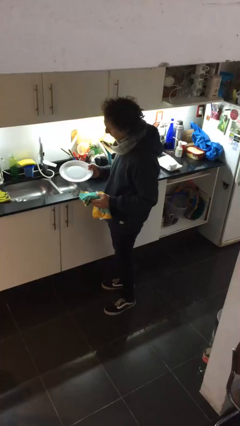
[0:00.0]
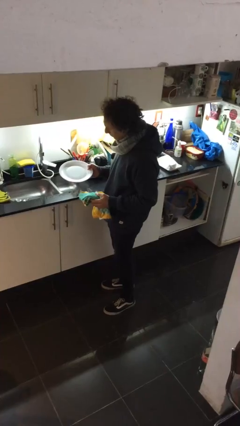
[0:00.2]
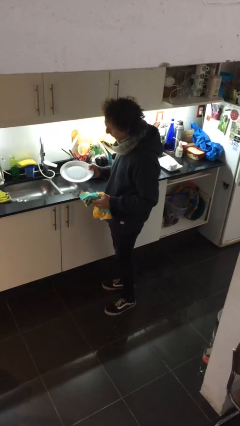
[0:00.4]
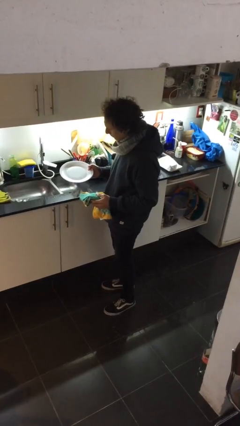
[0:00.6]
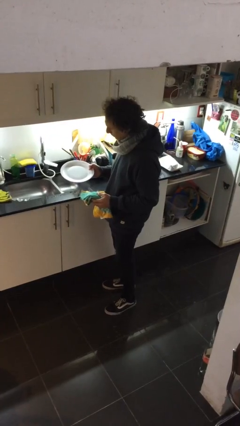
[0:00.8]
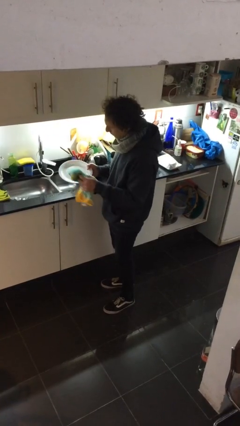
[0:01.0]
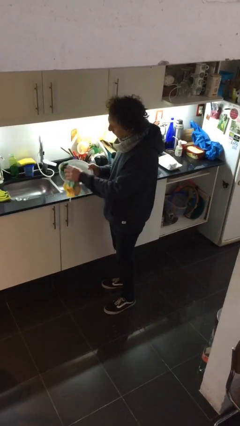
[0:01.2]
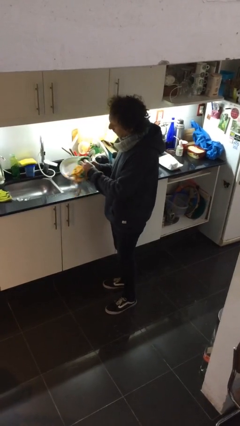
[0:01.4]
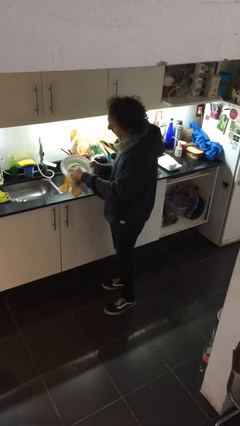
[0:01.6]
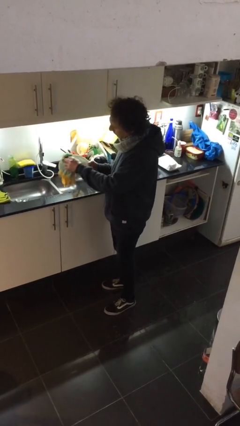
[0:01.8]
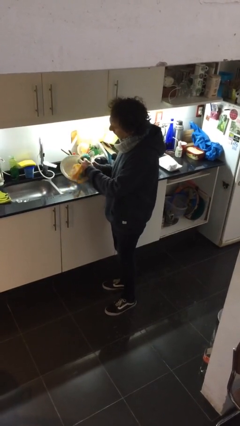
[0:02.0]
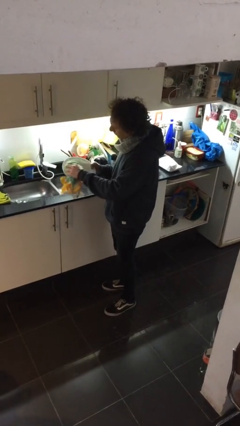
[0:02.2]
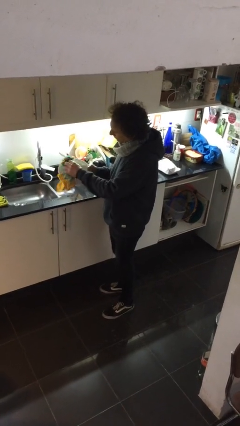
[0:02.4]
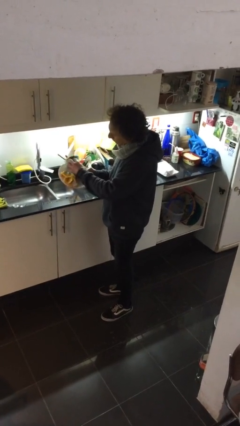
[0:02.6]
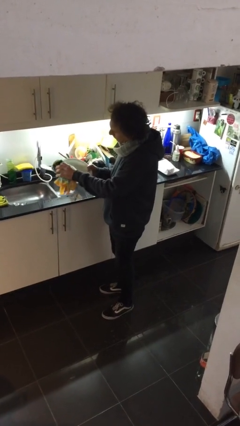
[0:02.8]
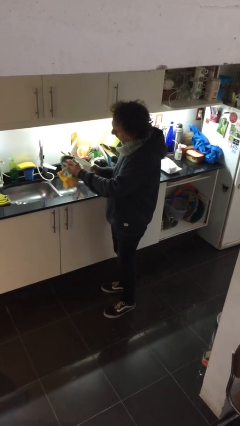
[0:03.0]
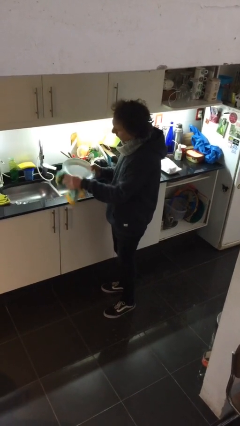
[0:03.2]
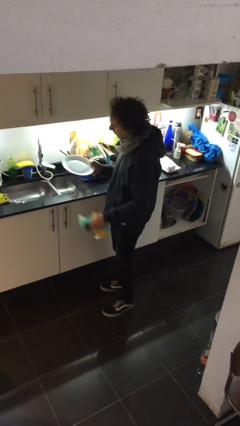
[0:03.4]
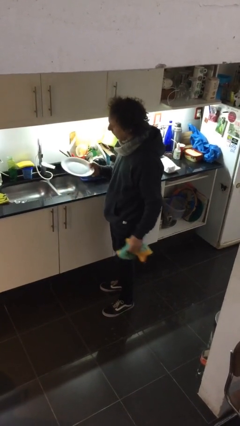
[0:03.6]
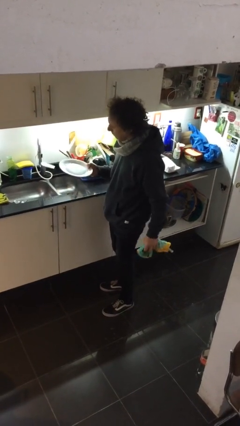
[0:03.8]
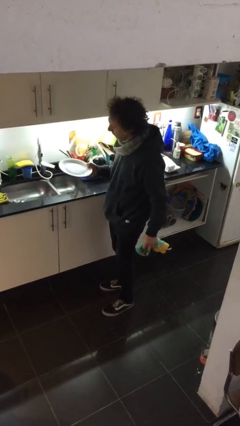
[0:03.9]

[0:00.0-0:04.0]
person dries dish

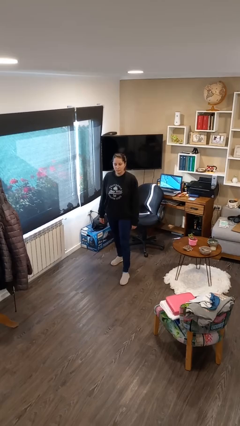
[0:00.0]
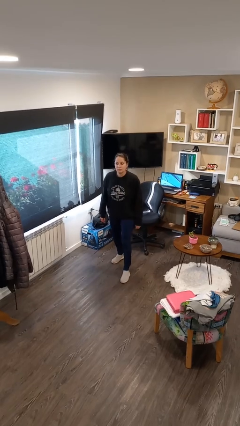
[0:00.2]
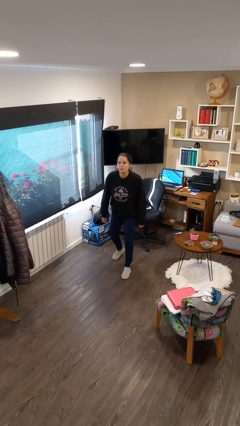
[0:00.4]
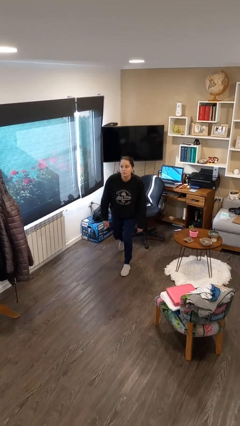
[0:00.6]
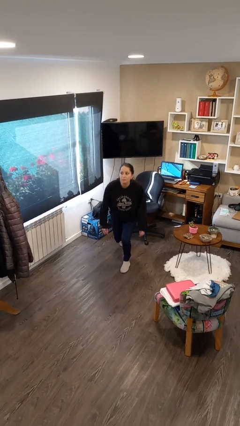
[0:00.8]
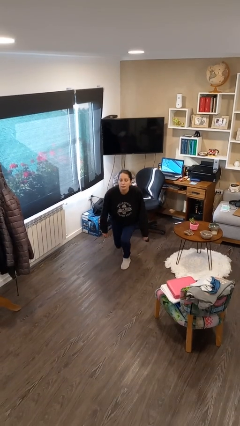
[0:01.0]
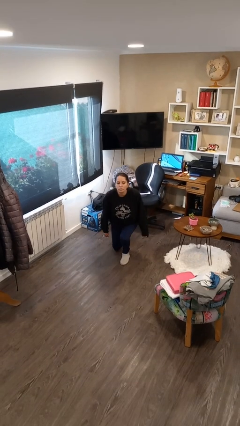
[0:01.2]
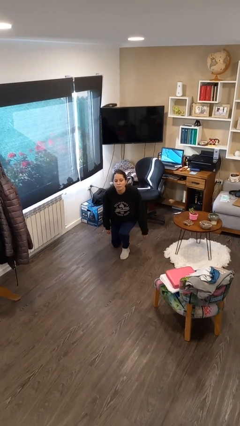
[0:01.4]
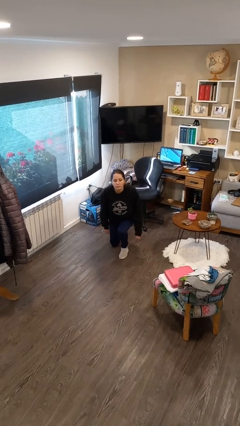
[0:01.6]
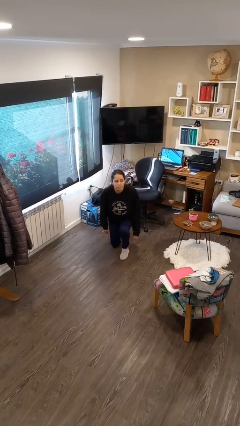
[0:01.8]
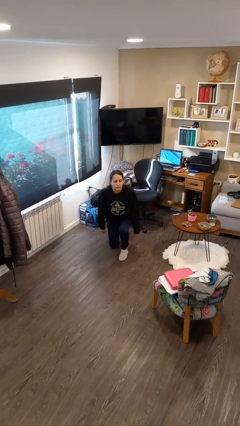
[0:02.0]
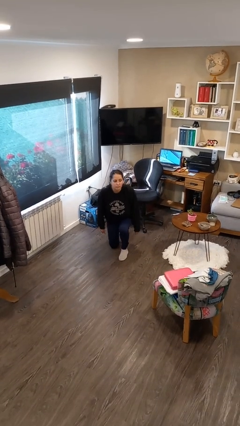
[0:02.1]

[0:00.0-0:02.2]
person kneels

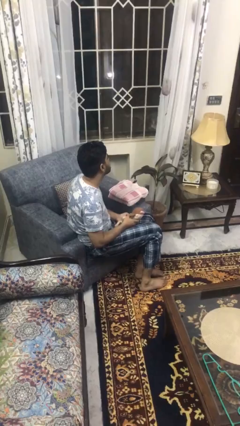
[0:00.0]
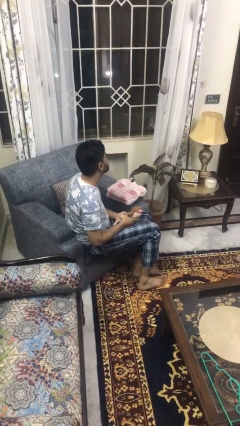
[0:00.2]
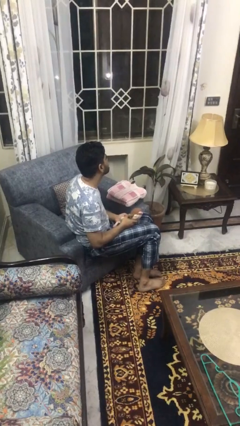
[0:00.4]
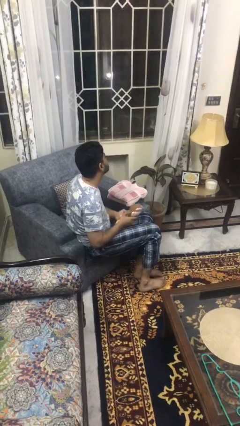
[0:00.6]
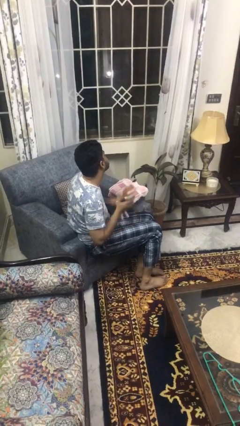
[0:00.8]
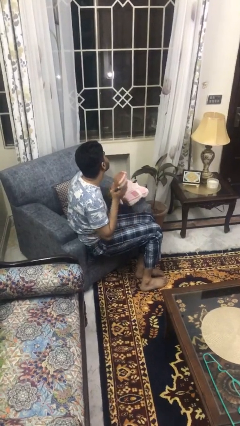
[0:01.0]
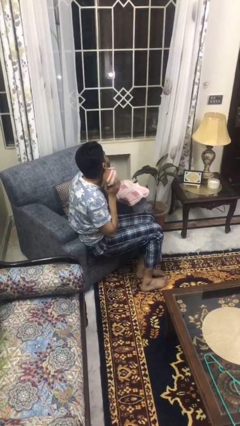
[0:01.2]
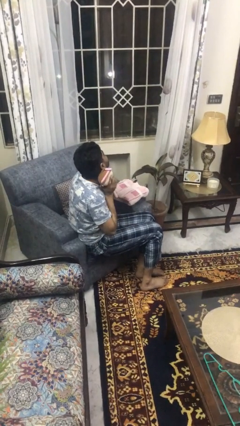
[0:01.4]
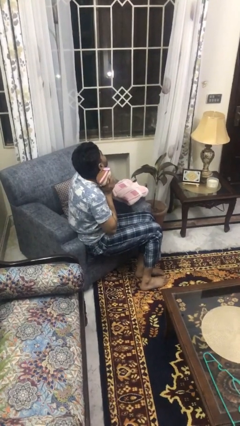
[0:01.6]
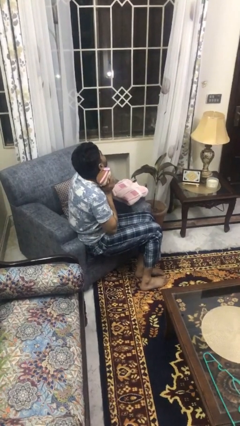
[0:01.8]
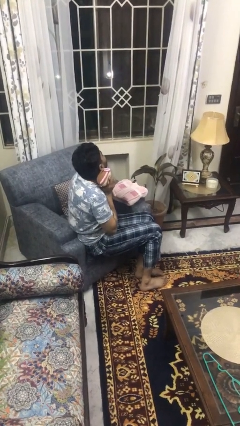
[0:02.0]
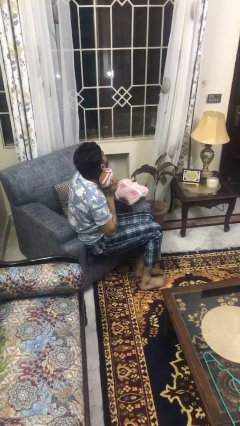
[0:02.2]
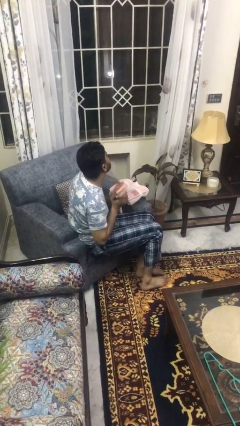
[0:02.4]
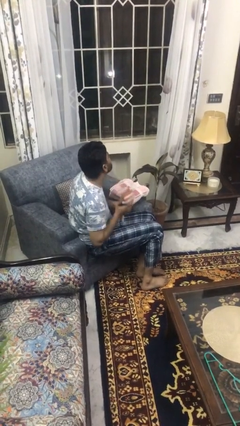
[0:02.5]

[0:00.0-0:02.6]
person hugs stuffed animal

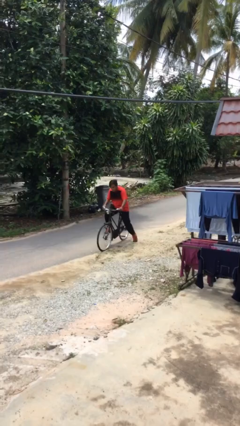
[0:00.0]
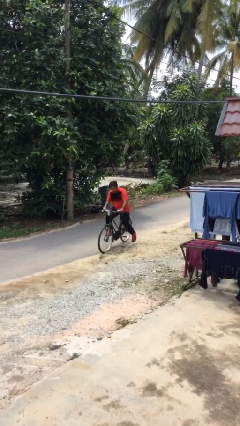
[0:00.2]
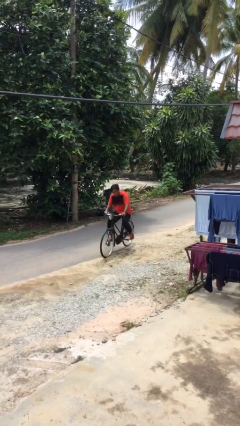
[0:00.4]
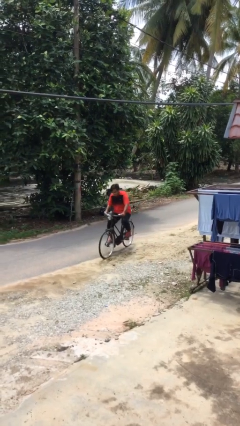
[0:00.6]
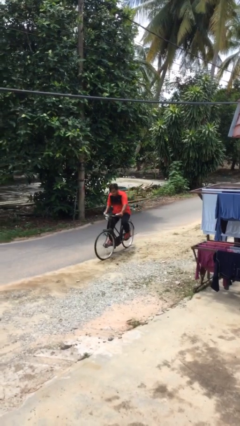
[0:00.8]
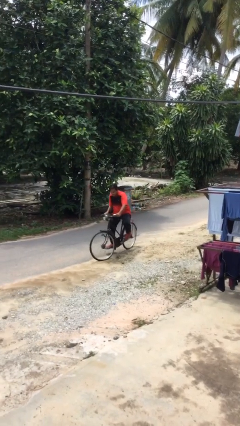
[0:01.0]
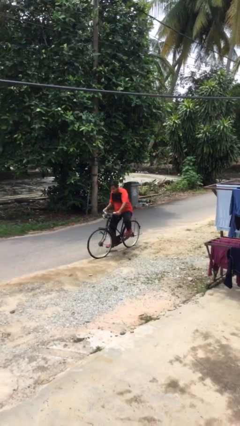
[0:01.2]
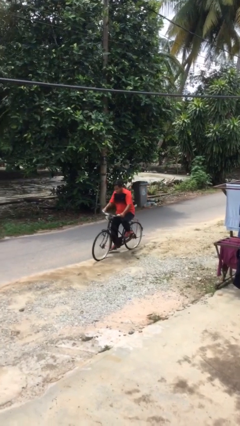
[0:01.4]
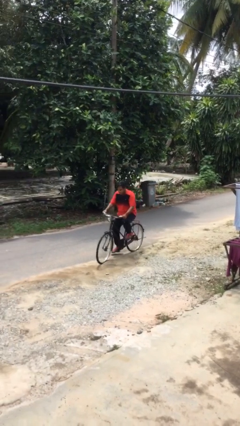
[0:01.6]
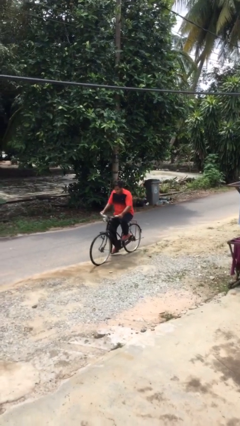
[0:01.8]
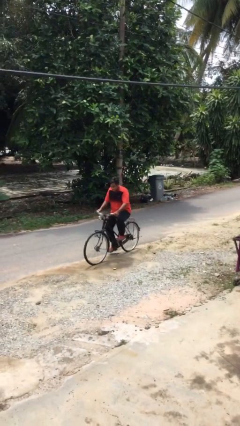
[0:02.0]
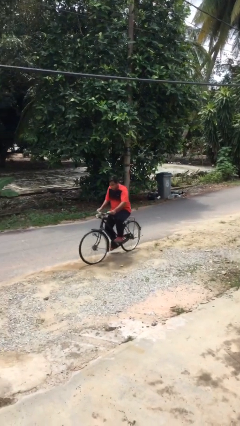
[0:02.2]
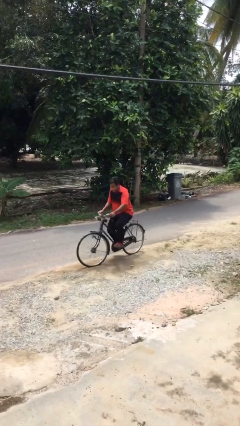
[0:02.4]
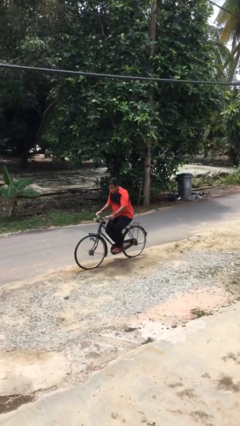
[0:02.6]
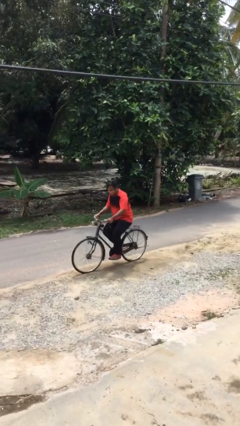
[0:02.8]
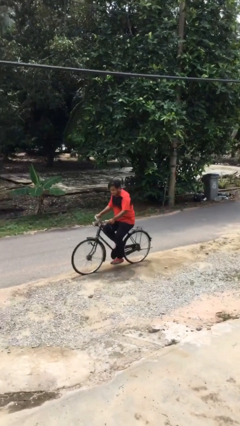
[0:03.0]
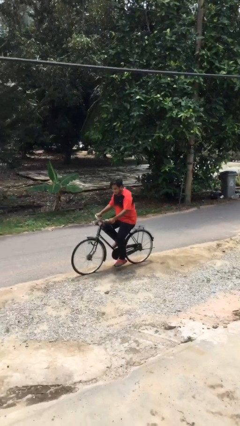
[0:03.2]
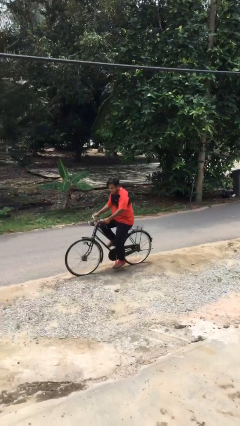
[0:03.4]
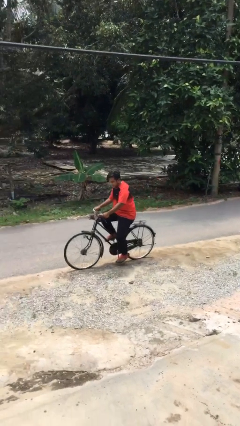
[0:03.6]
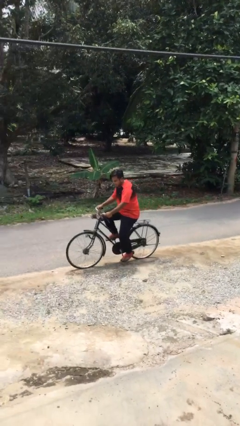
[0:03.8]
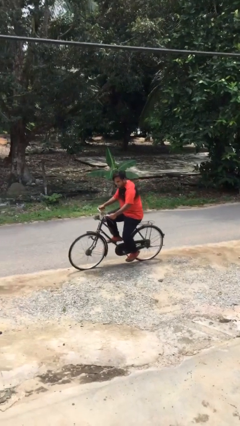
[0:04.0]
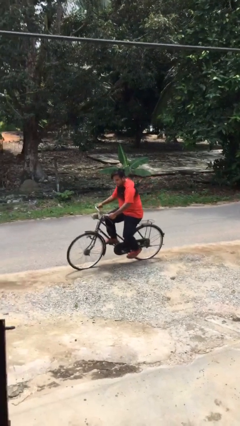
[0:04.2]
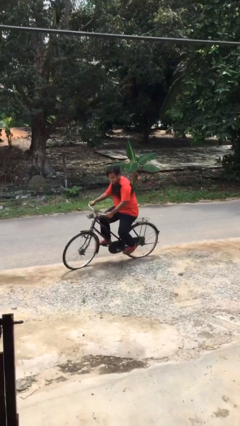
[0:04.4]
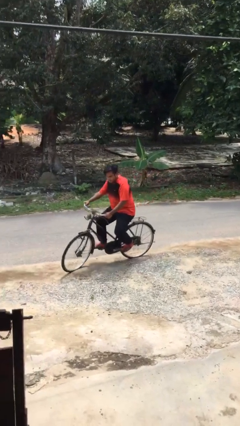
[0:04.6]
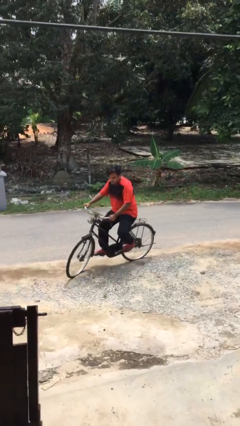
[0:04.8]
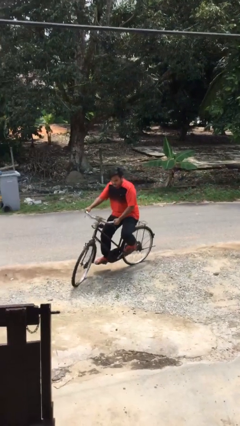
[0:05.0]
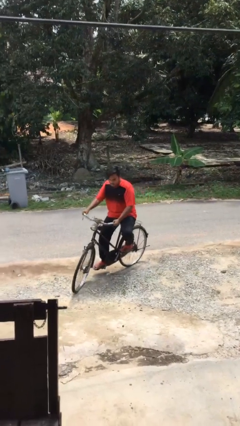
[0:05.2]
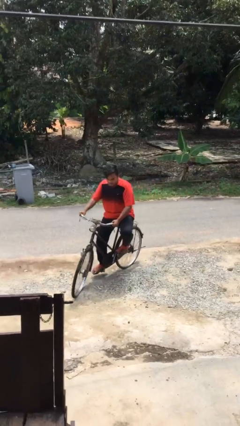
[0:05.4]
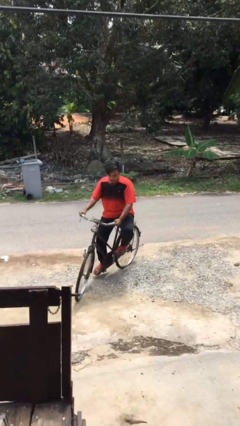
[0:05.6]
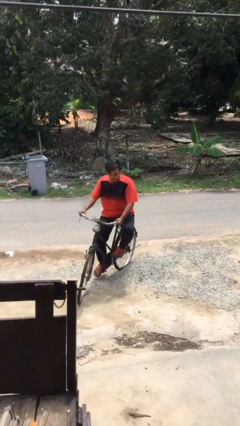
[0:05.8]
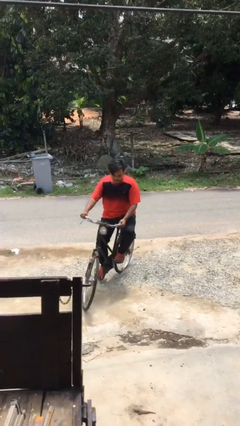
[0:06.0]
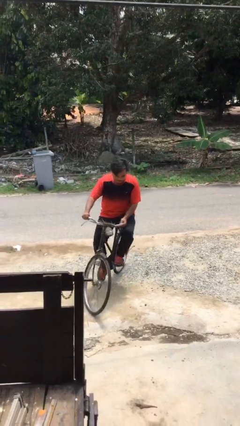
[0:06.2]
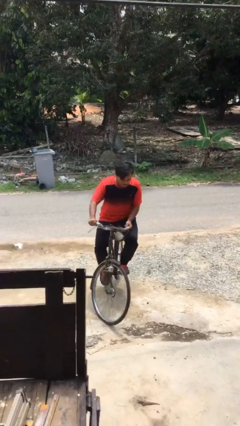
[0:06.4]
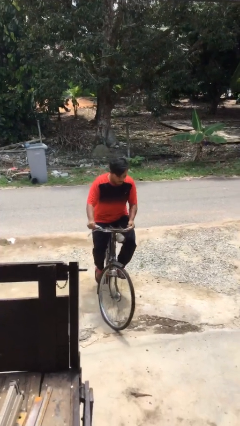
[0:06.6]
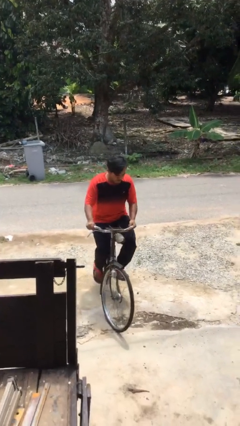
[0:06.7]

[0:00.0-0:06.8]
person rides bicycle

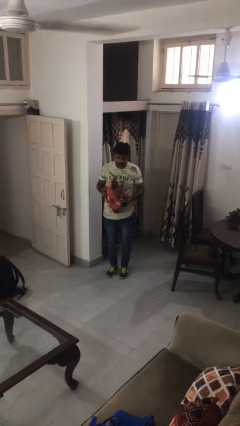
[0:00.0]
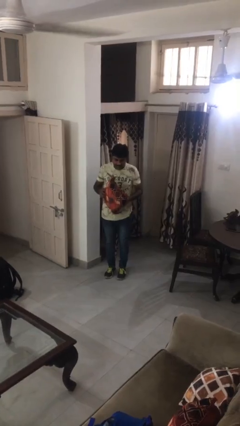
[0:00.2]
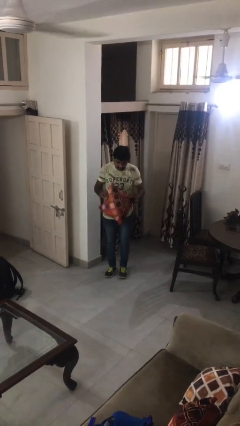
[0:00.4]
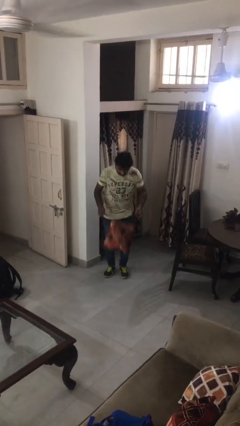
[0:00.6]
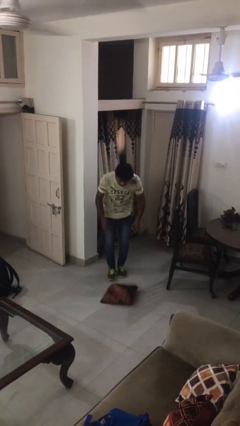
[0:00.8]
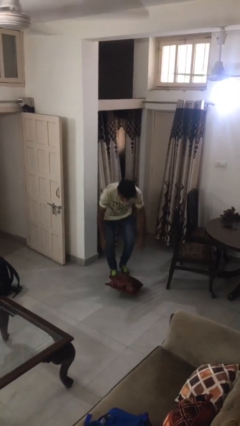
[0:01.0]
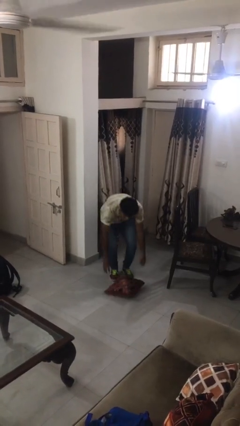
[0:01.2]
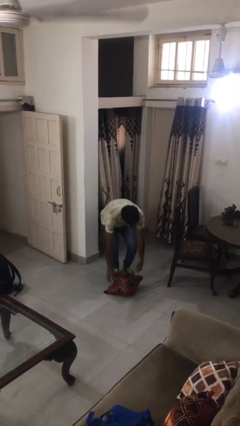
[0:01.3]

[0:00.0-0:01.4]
person drops object

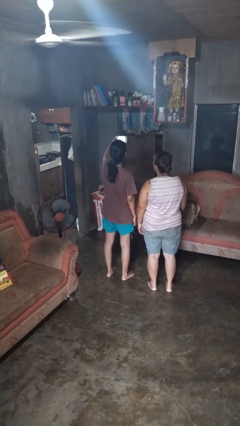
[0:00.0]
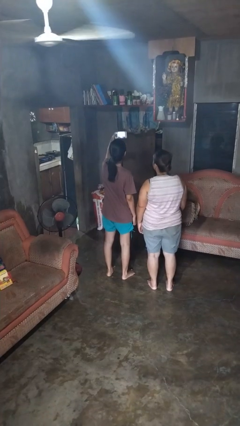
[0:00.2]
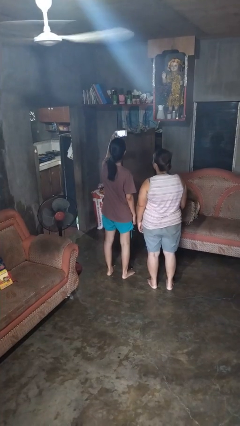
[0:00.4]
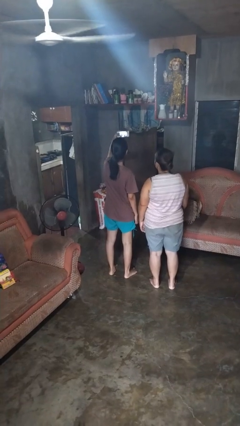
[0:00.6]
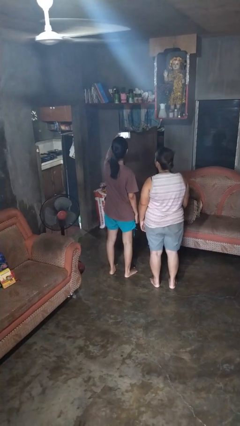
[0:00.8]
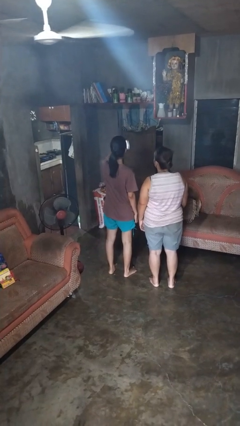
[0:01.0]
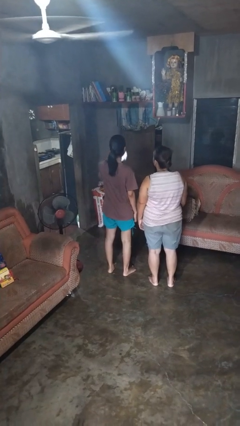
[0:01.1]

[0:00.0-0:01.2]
person takes selfie with person
